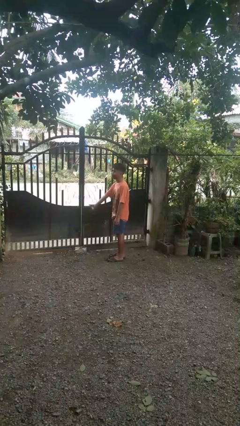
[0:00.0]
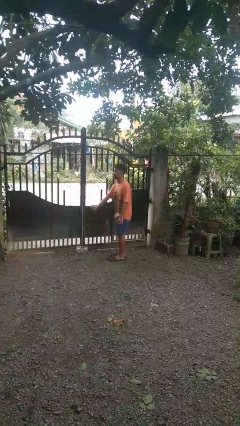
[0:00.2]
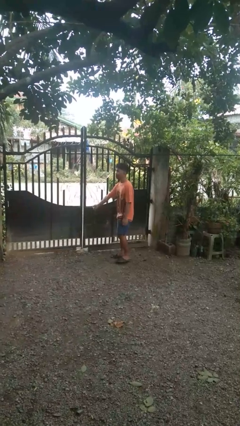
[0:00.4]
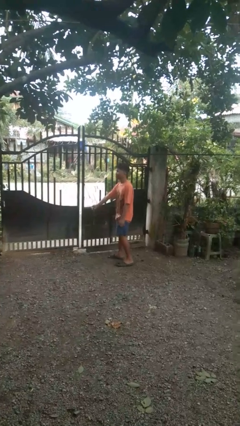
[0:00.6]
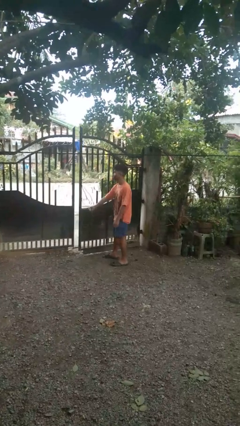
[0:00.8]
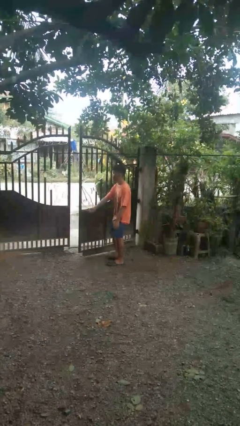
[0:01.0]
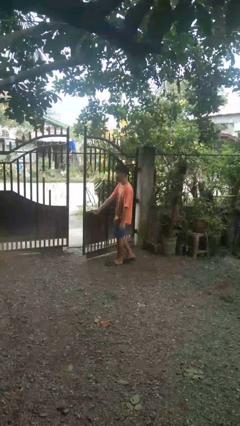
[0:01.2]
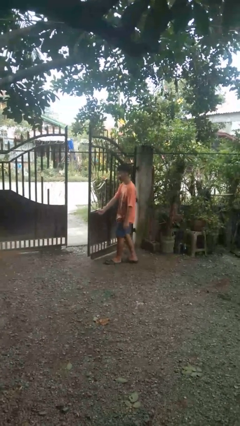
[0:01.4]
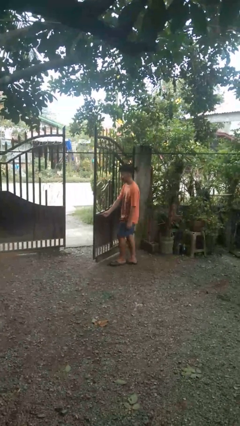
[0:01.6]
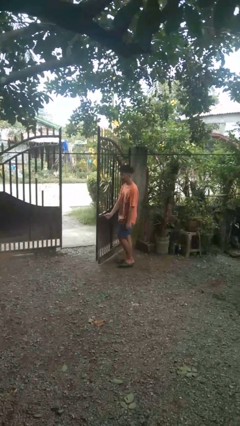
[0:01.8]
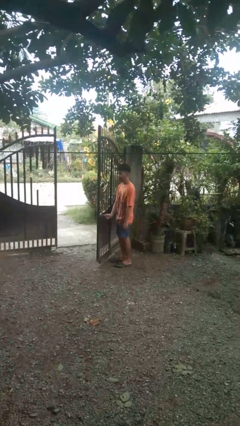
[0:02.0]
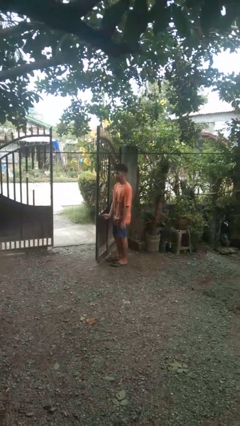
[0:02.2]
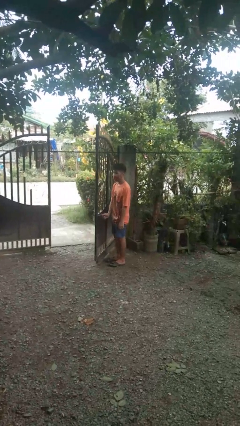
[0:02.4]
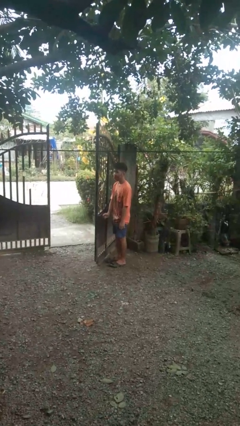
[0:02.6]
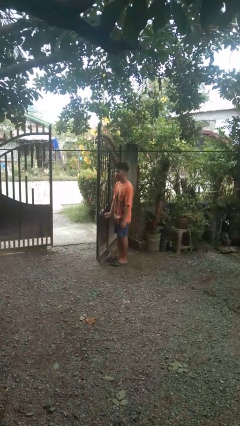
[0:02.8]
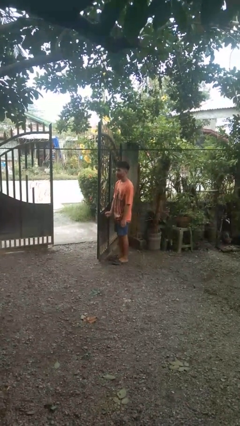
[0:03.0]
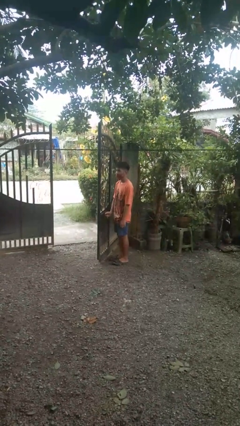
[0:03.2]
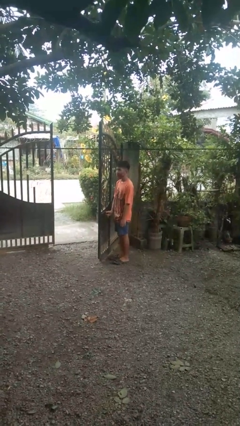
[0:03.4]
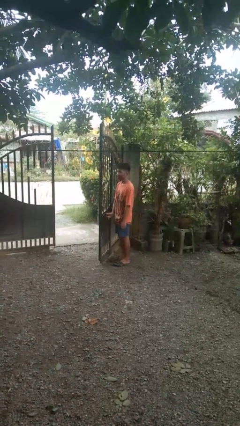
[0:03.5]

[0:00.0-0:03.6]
person opens gate

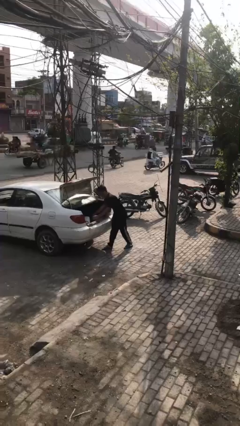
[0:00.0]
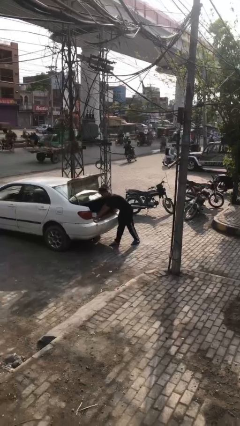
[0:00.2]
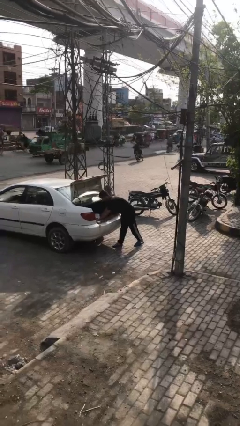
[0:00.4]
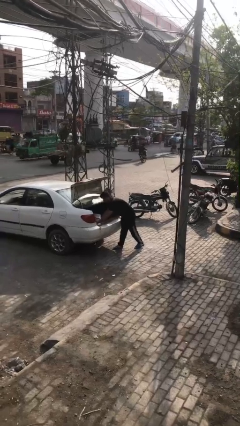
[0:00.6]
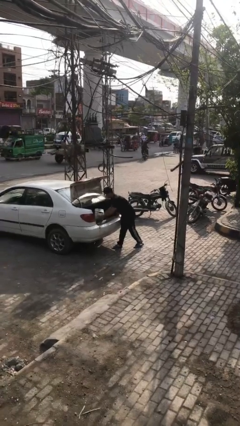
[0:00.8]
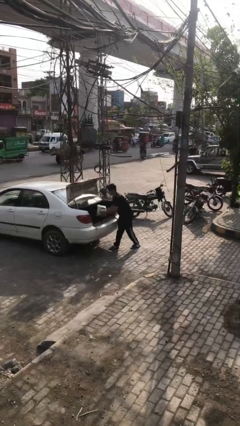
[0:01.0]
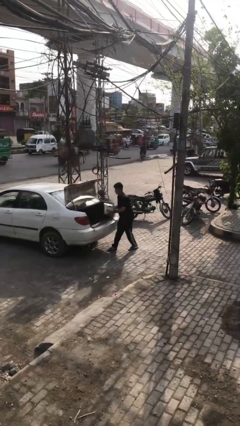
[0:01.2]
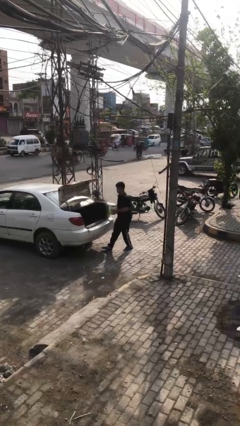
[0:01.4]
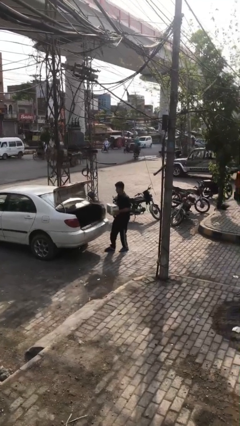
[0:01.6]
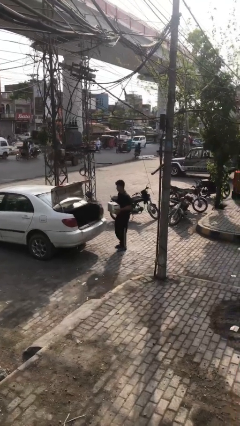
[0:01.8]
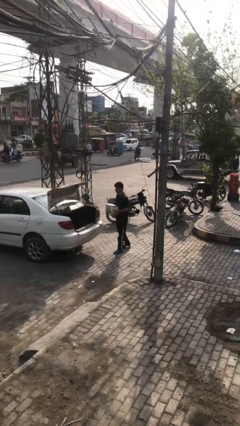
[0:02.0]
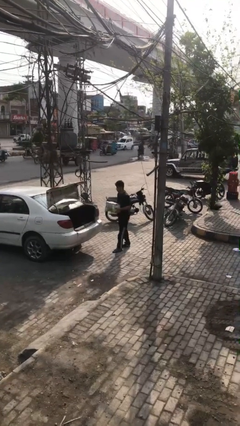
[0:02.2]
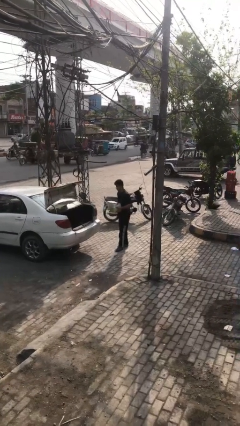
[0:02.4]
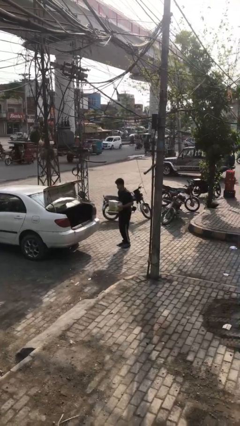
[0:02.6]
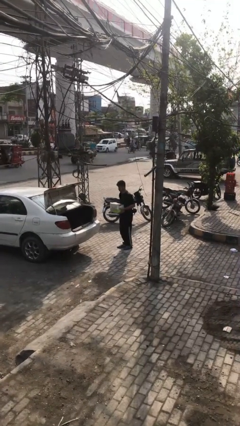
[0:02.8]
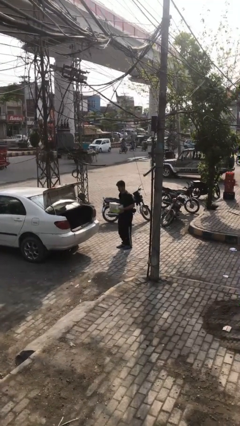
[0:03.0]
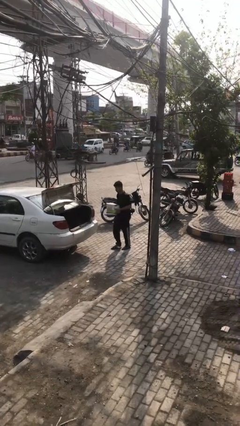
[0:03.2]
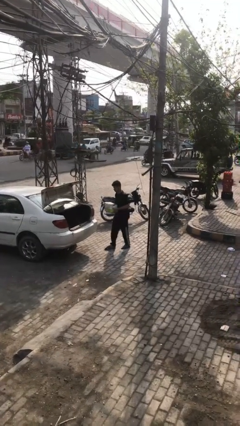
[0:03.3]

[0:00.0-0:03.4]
person unloads car

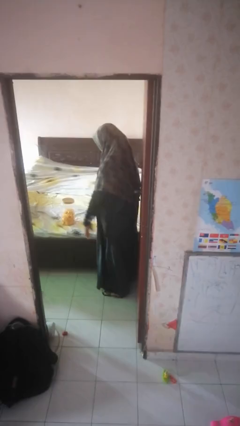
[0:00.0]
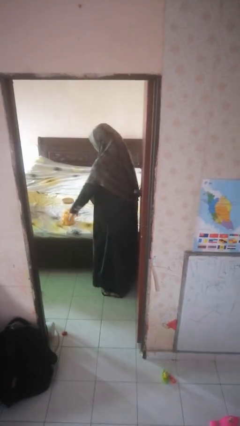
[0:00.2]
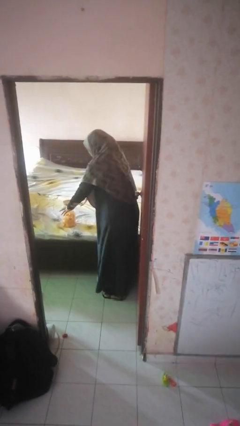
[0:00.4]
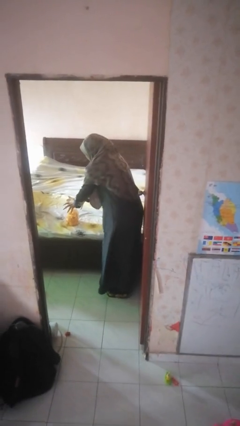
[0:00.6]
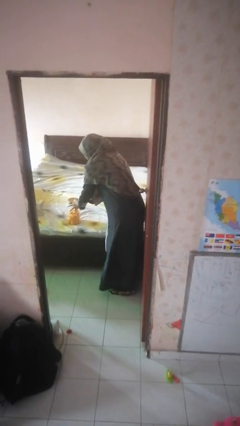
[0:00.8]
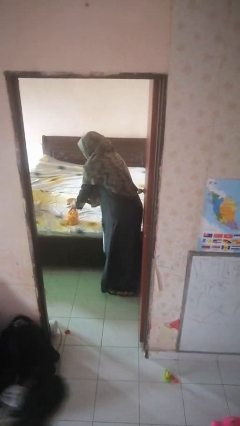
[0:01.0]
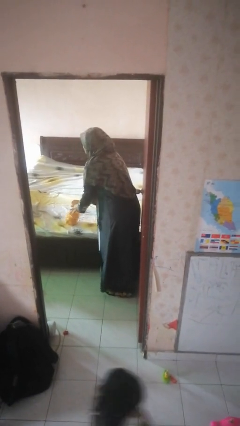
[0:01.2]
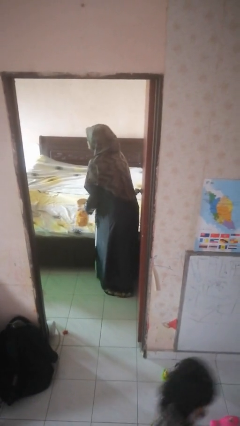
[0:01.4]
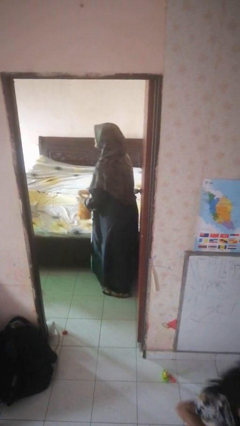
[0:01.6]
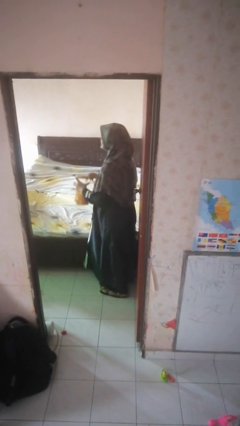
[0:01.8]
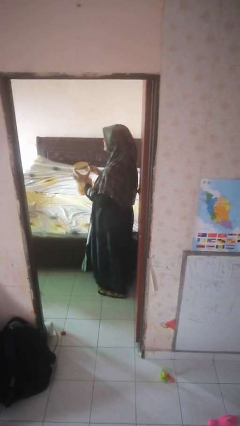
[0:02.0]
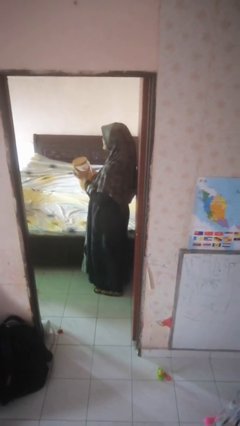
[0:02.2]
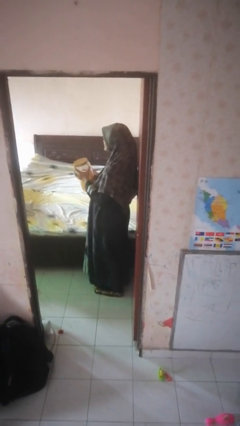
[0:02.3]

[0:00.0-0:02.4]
person picks up object from bed

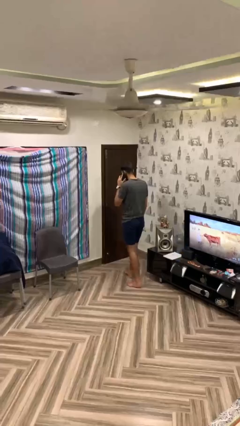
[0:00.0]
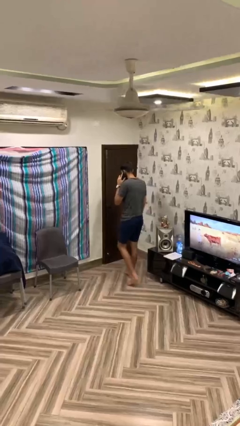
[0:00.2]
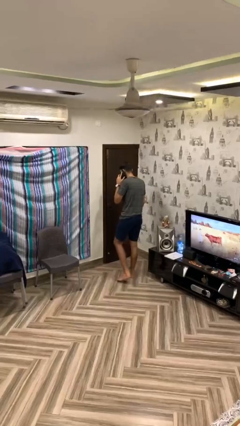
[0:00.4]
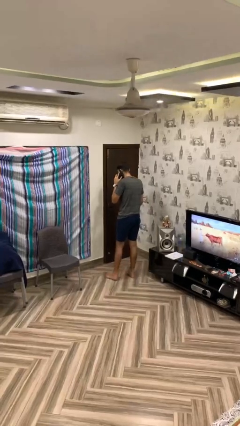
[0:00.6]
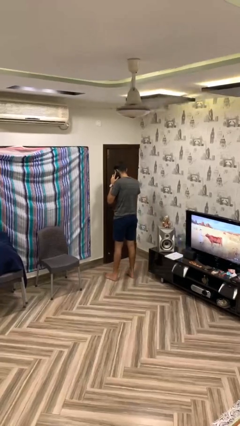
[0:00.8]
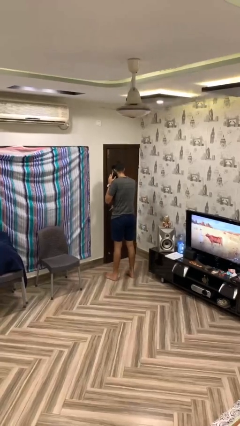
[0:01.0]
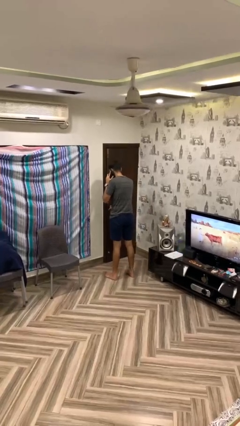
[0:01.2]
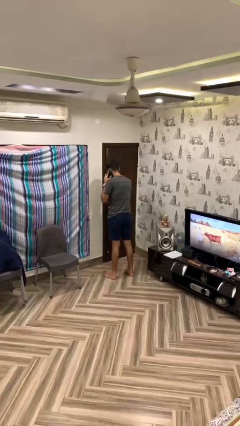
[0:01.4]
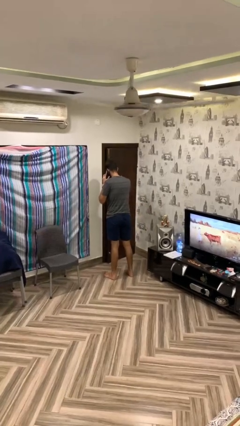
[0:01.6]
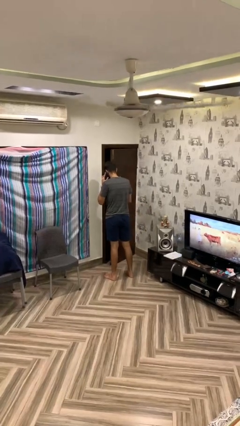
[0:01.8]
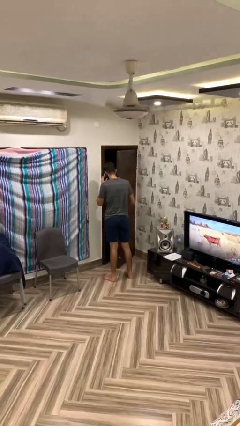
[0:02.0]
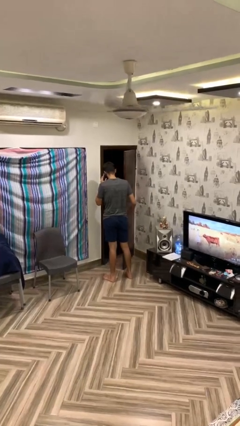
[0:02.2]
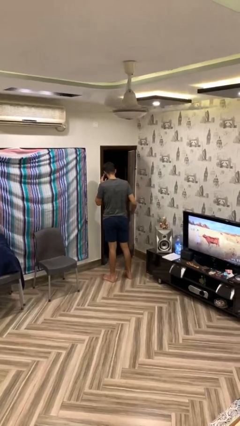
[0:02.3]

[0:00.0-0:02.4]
person opens facility door

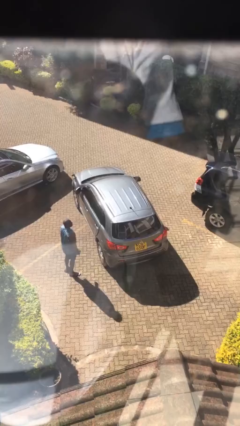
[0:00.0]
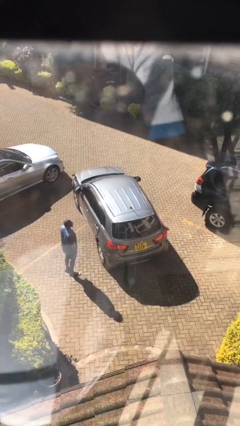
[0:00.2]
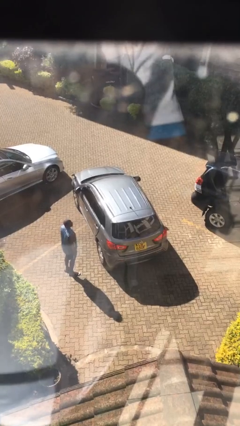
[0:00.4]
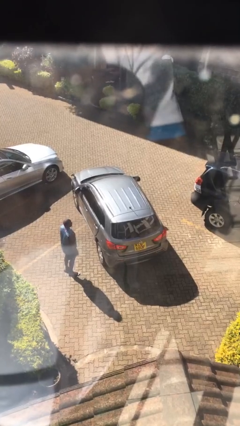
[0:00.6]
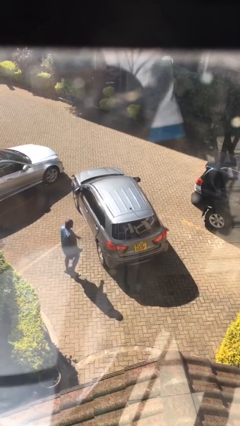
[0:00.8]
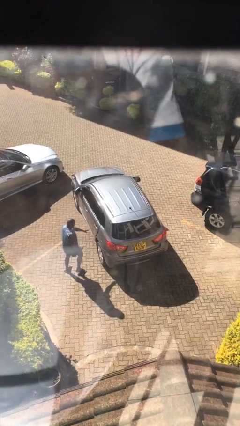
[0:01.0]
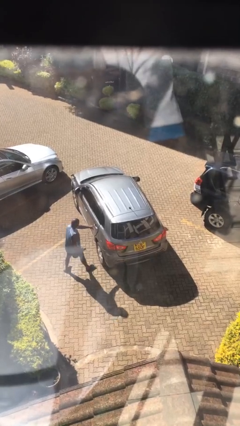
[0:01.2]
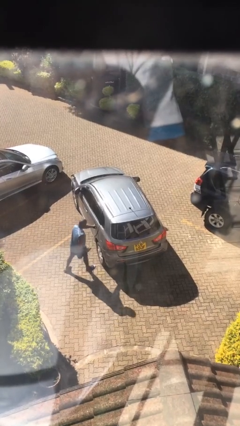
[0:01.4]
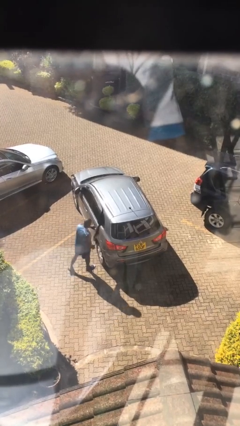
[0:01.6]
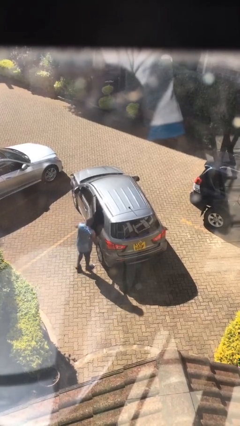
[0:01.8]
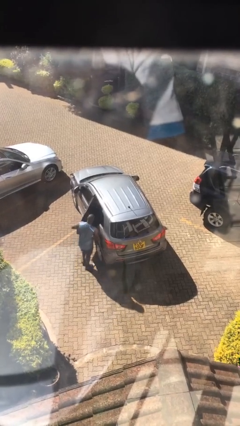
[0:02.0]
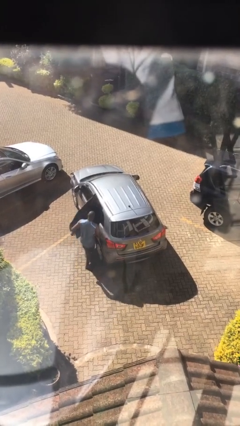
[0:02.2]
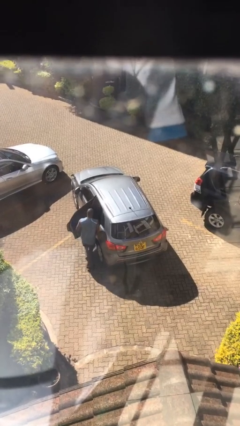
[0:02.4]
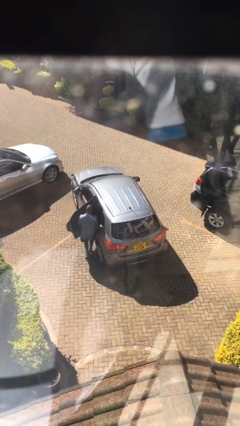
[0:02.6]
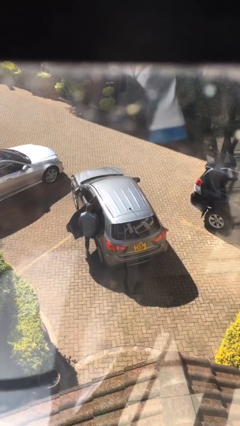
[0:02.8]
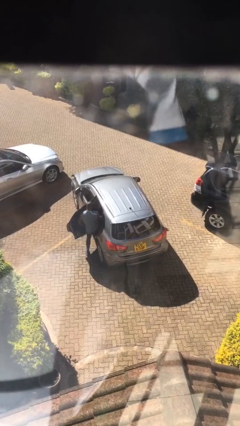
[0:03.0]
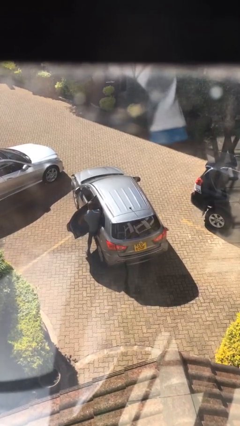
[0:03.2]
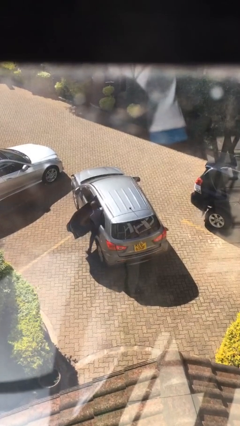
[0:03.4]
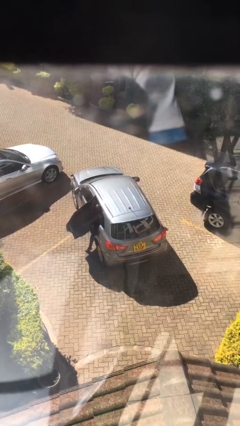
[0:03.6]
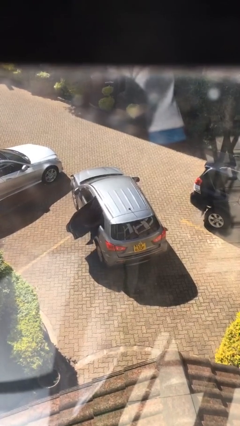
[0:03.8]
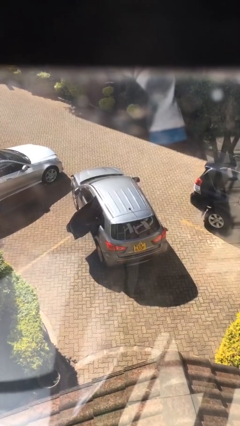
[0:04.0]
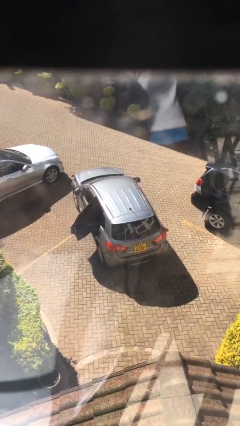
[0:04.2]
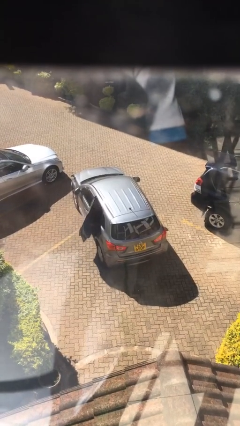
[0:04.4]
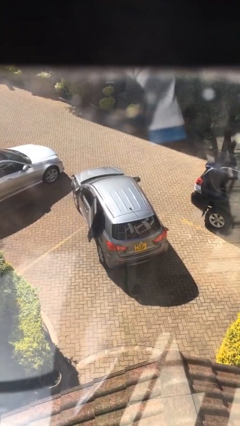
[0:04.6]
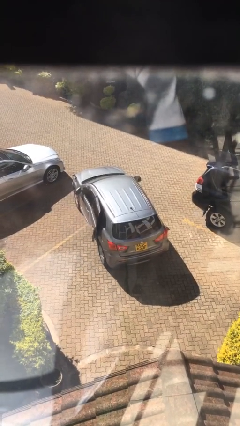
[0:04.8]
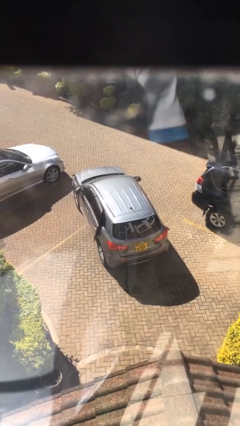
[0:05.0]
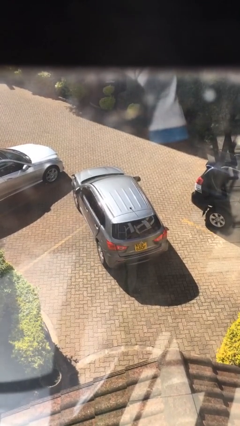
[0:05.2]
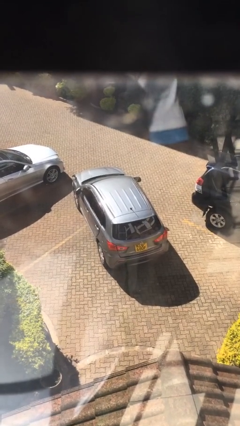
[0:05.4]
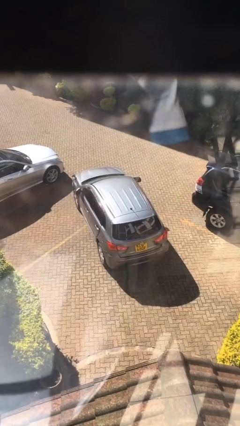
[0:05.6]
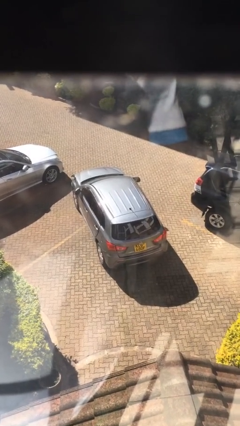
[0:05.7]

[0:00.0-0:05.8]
car picks up person

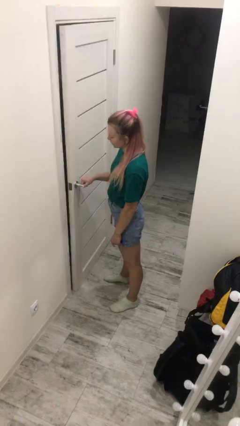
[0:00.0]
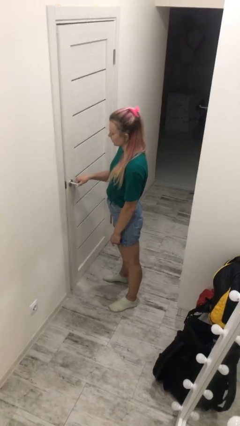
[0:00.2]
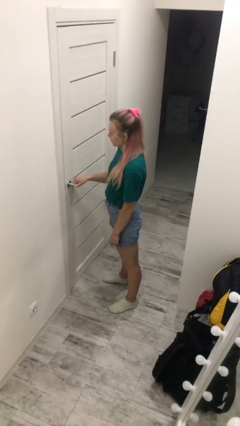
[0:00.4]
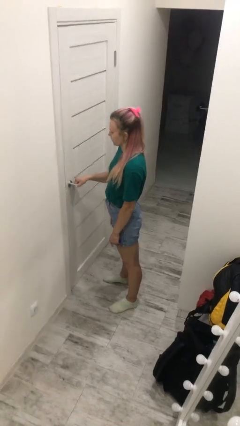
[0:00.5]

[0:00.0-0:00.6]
person closes facility door
